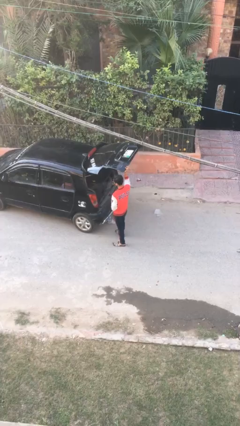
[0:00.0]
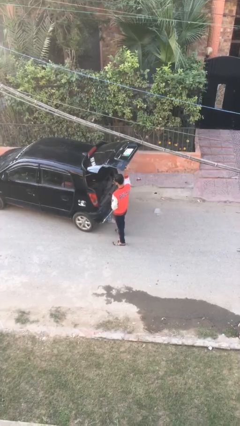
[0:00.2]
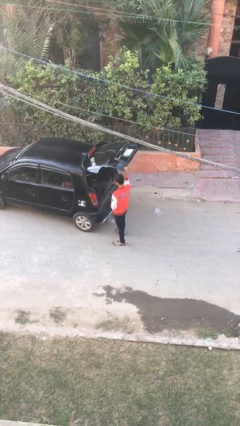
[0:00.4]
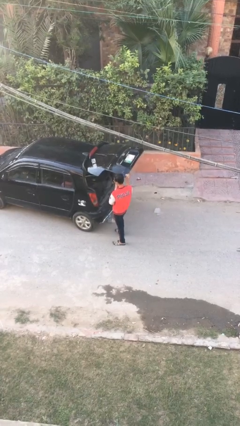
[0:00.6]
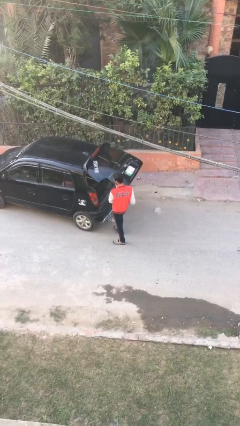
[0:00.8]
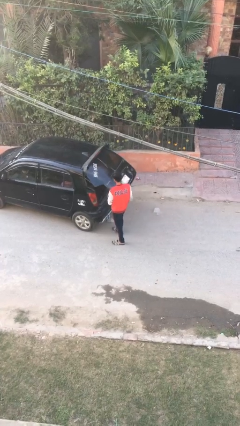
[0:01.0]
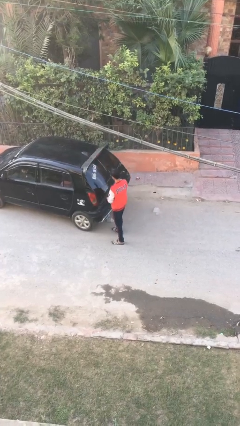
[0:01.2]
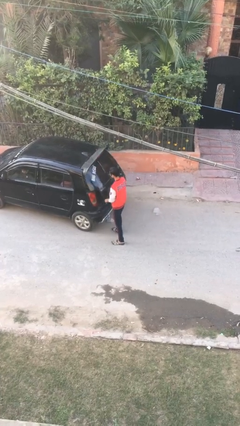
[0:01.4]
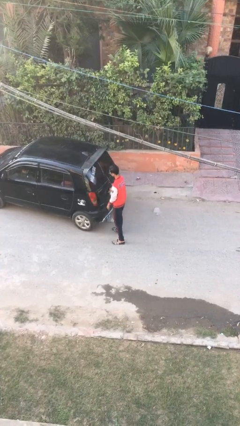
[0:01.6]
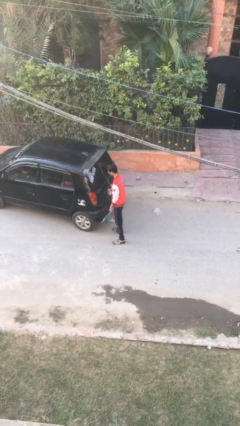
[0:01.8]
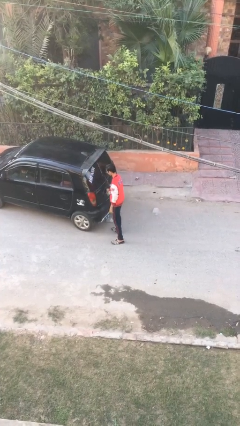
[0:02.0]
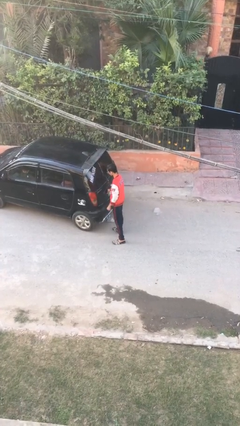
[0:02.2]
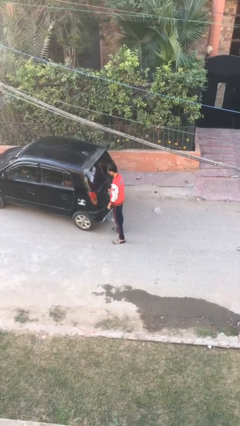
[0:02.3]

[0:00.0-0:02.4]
person closes car trunk

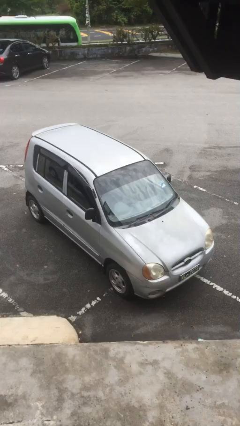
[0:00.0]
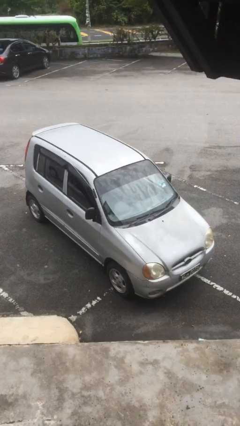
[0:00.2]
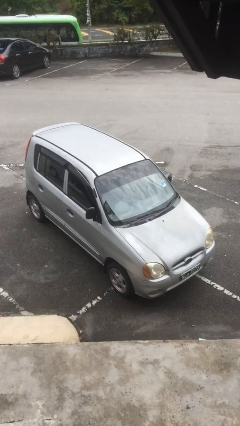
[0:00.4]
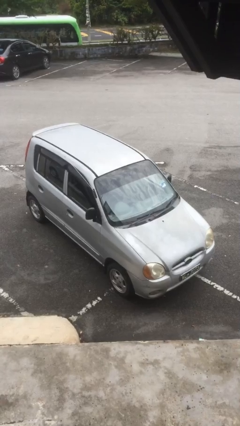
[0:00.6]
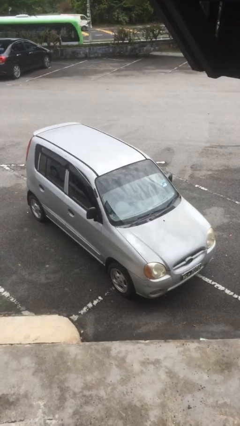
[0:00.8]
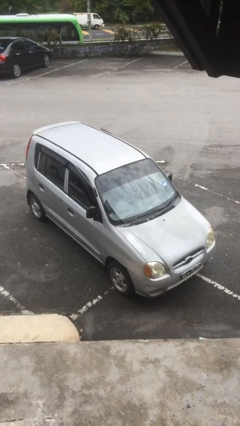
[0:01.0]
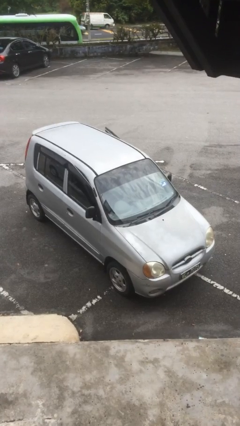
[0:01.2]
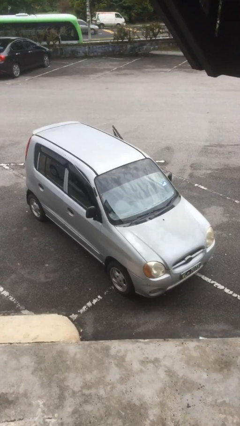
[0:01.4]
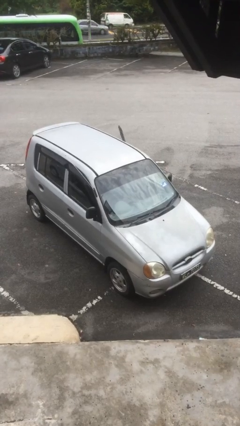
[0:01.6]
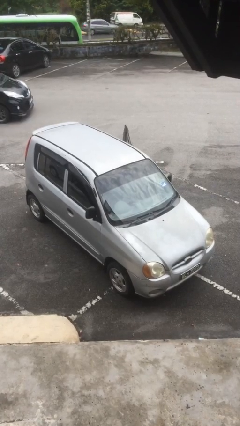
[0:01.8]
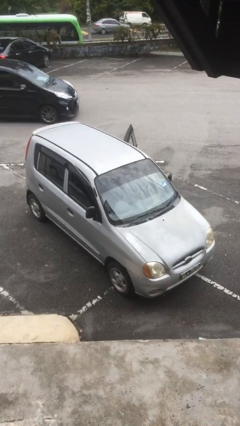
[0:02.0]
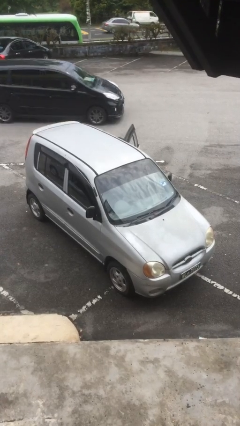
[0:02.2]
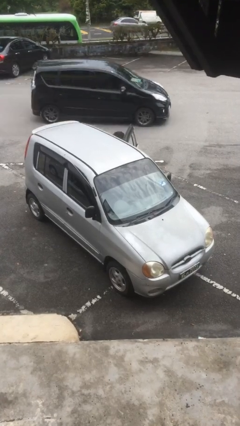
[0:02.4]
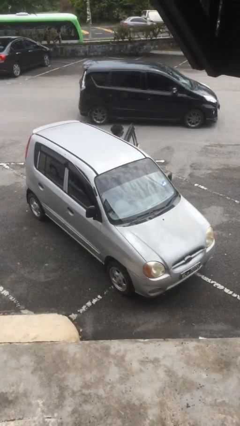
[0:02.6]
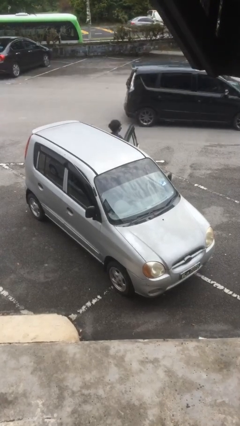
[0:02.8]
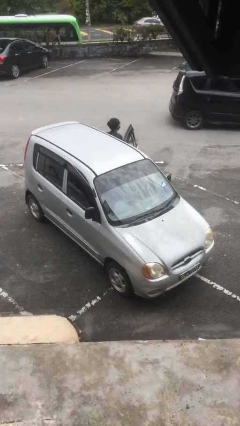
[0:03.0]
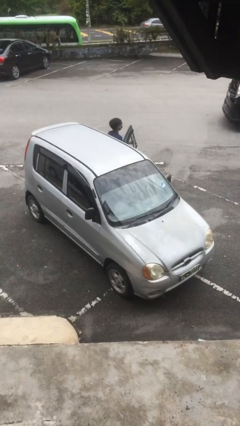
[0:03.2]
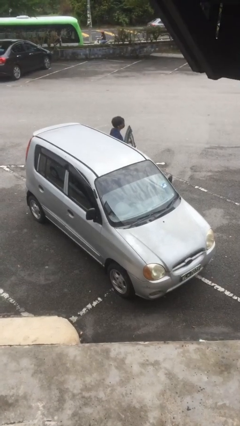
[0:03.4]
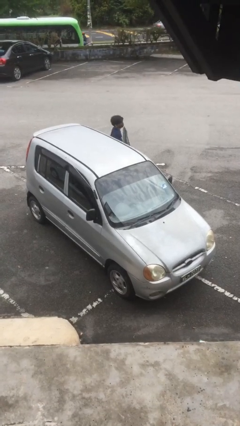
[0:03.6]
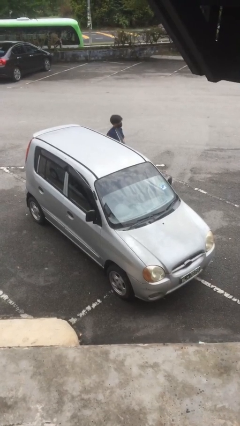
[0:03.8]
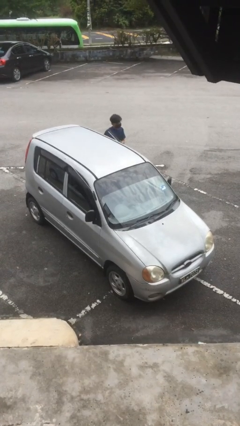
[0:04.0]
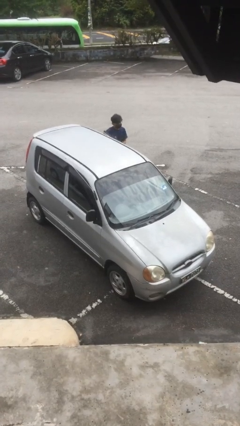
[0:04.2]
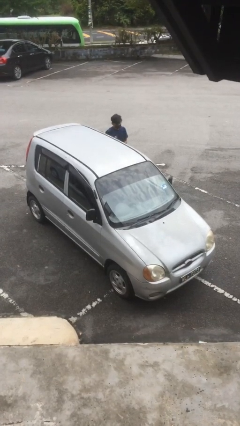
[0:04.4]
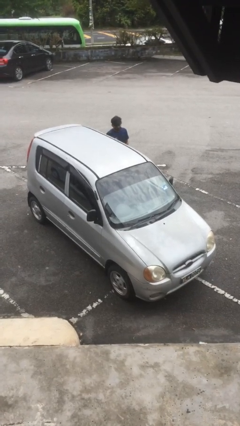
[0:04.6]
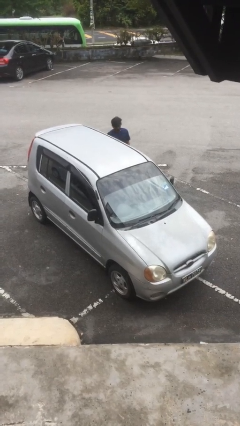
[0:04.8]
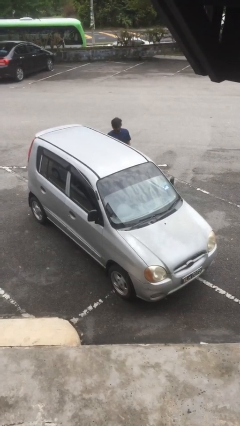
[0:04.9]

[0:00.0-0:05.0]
car drops off person

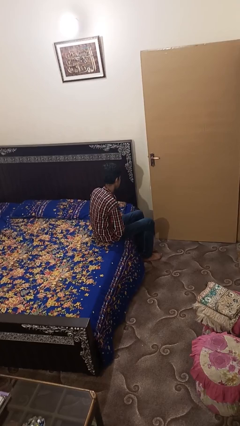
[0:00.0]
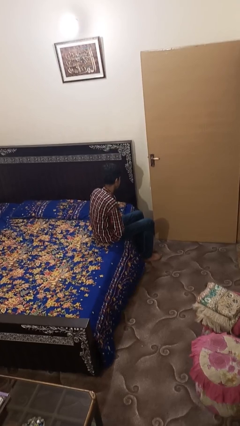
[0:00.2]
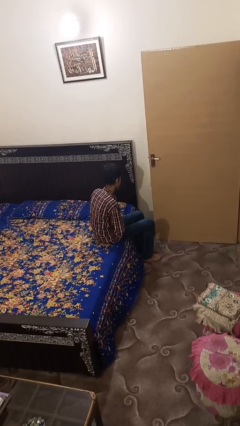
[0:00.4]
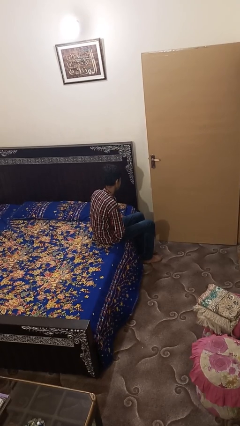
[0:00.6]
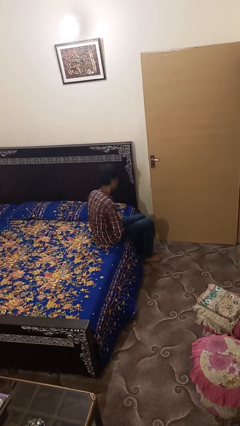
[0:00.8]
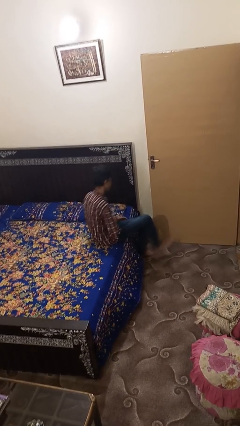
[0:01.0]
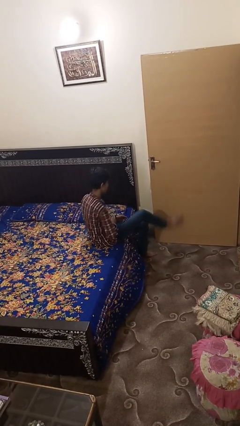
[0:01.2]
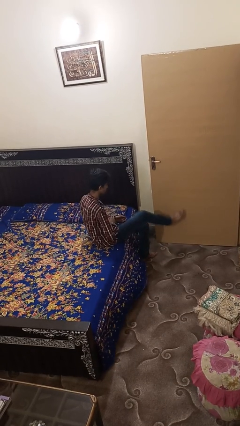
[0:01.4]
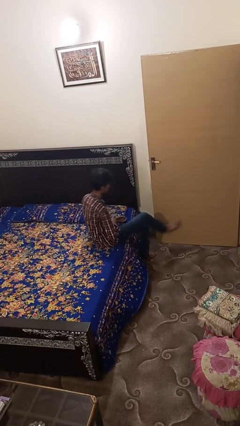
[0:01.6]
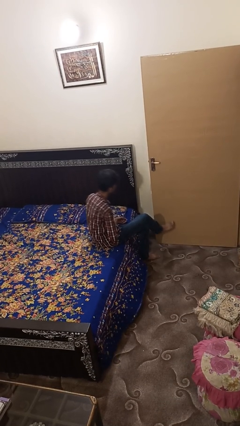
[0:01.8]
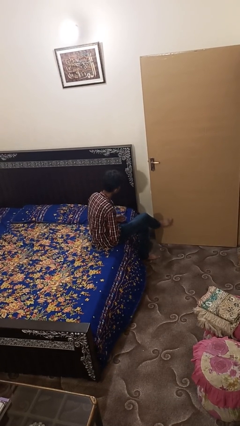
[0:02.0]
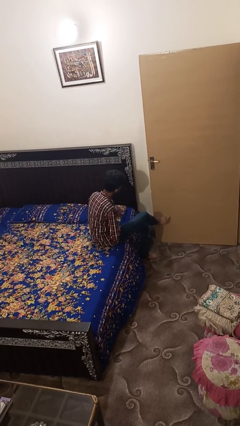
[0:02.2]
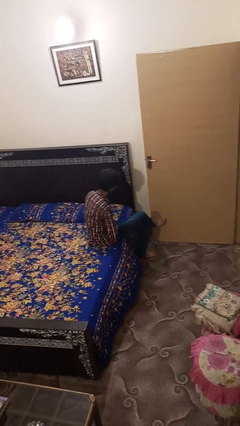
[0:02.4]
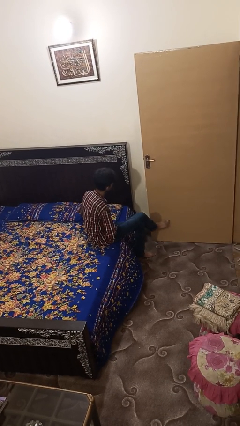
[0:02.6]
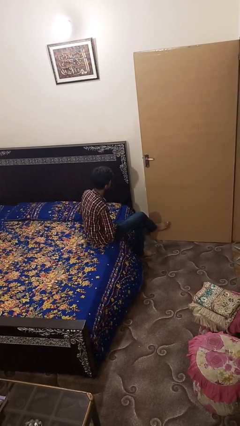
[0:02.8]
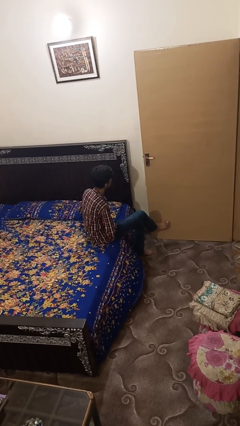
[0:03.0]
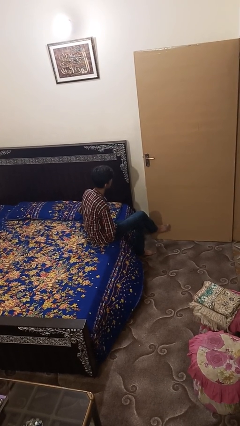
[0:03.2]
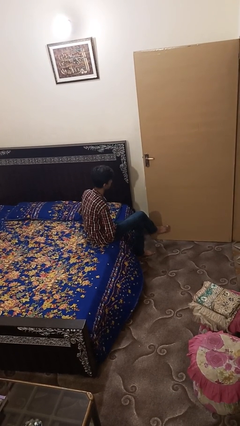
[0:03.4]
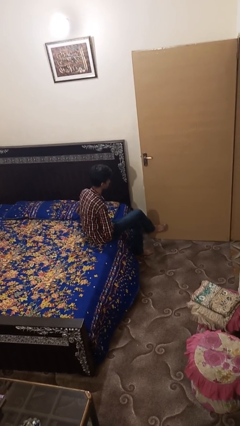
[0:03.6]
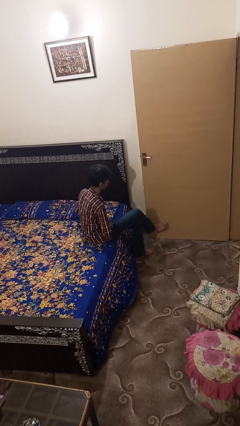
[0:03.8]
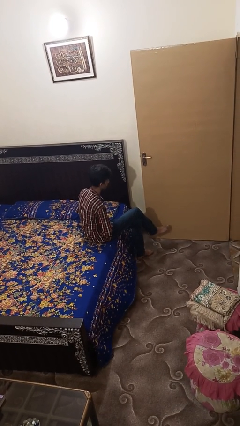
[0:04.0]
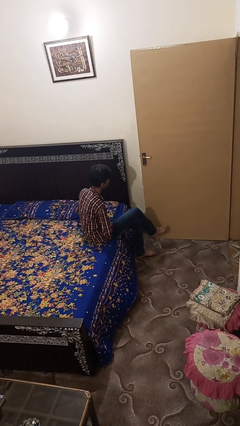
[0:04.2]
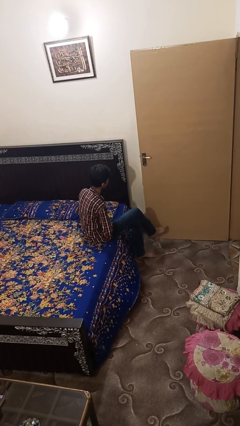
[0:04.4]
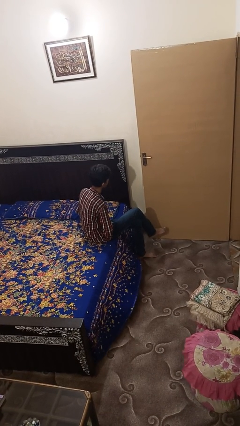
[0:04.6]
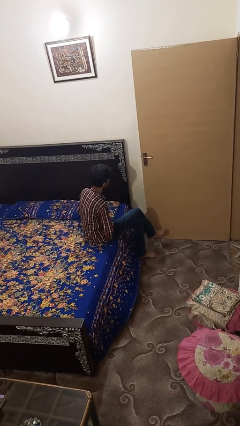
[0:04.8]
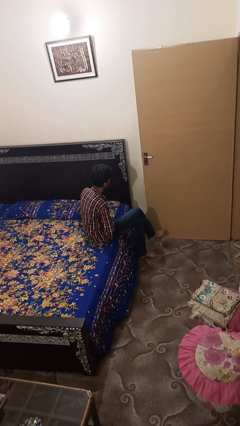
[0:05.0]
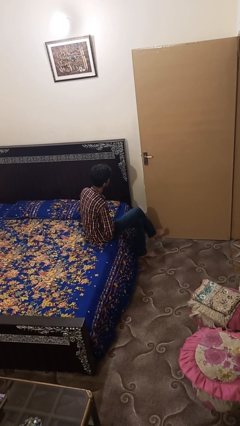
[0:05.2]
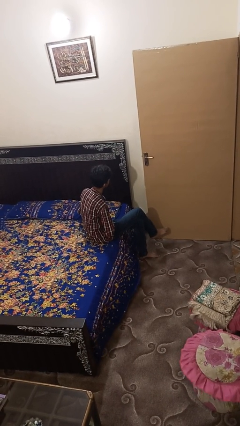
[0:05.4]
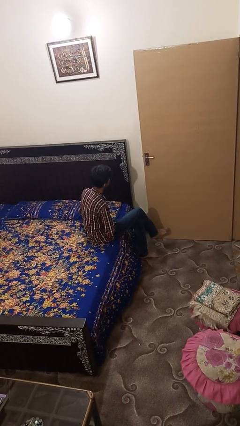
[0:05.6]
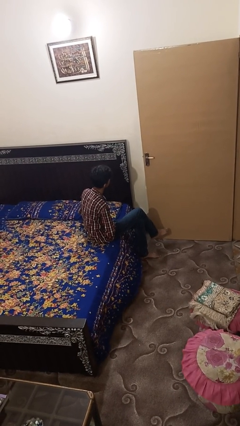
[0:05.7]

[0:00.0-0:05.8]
person crosses legs

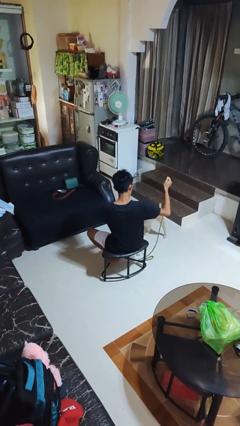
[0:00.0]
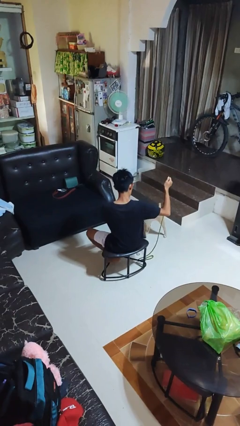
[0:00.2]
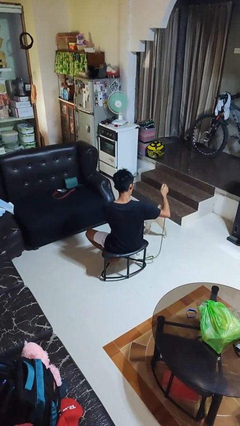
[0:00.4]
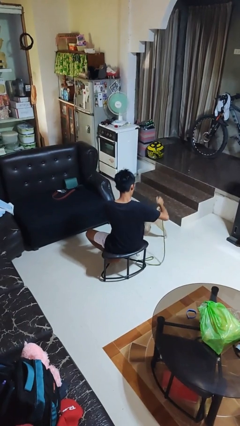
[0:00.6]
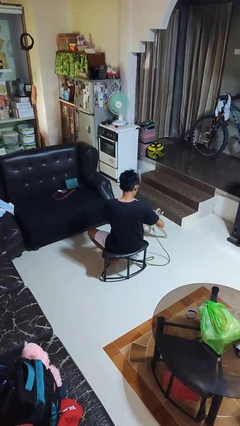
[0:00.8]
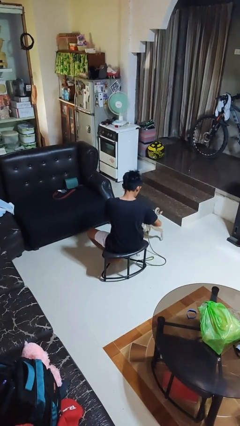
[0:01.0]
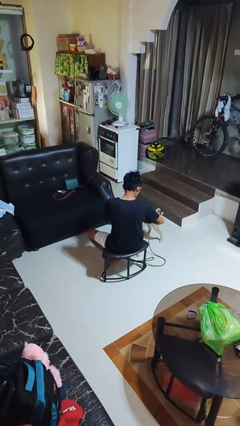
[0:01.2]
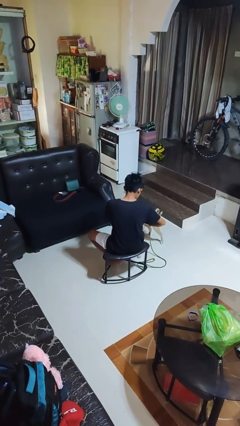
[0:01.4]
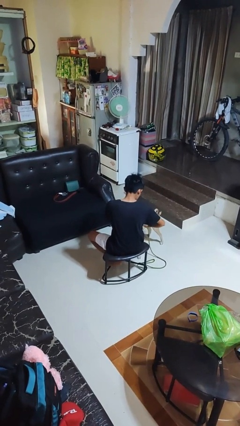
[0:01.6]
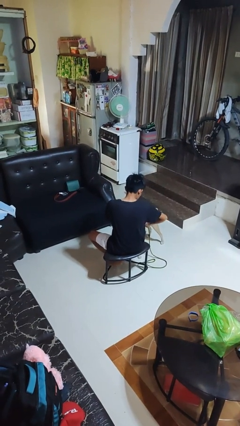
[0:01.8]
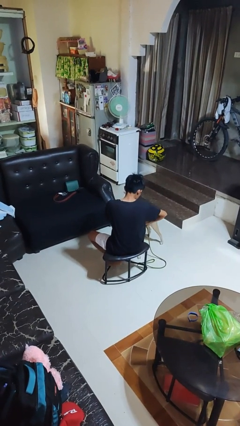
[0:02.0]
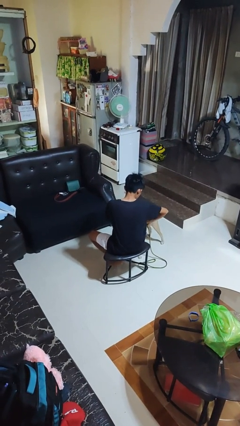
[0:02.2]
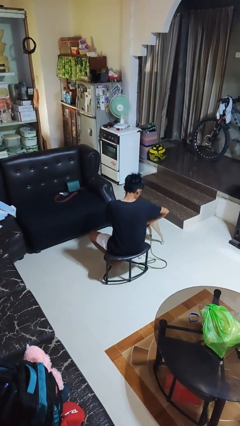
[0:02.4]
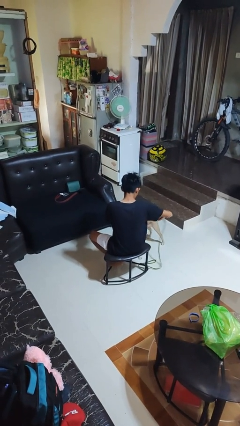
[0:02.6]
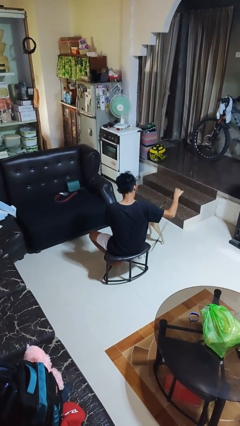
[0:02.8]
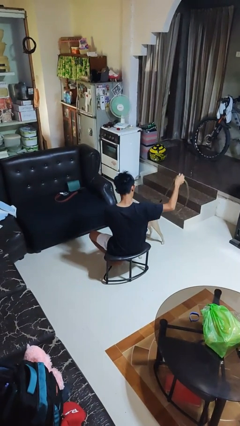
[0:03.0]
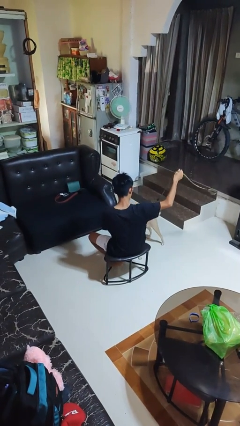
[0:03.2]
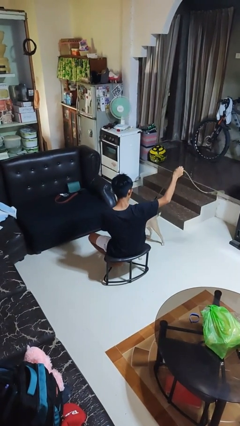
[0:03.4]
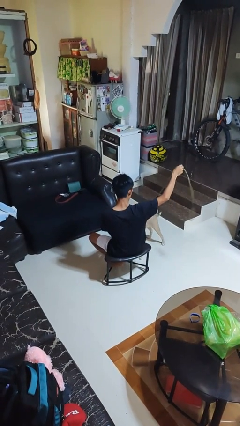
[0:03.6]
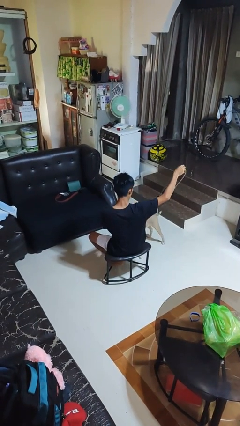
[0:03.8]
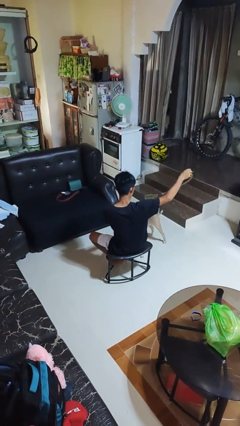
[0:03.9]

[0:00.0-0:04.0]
person attaches leash to dog

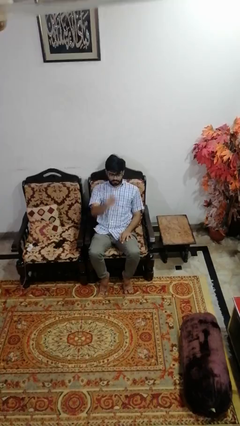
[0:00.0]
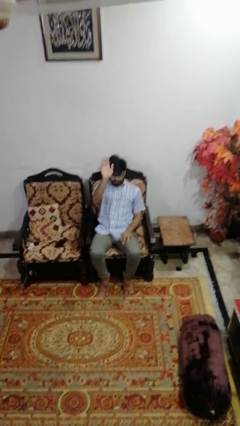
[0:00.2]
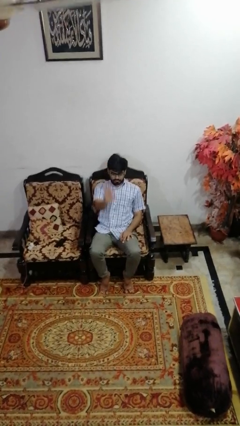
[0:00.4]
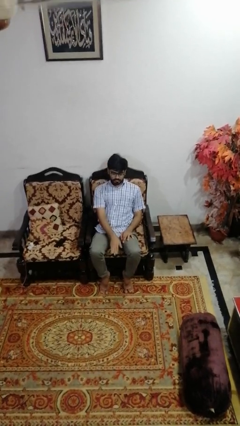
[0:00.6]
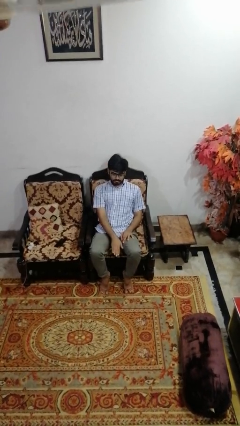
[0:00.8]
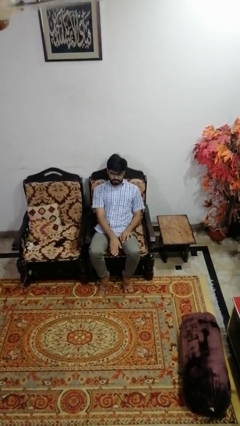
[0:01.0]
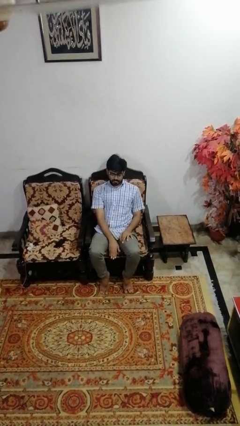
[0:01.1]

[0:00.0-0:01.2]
person gestures swipe down
